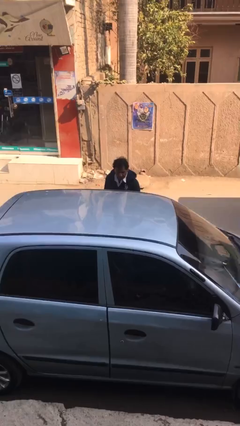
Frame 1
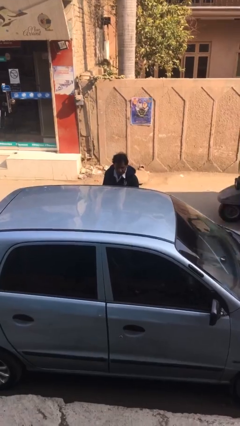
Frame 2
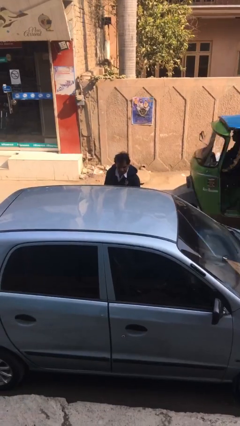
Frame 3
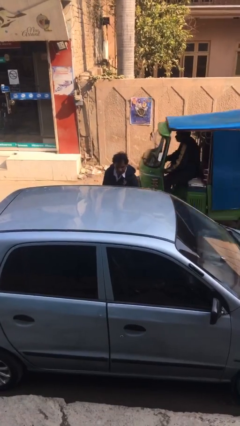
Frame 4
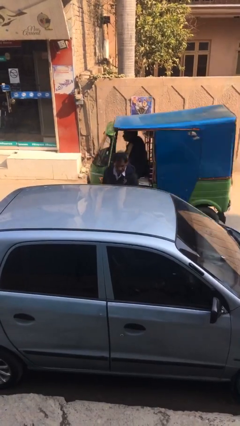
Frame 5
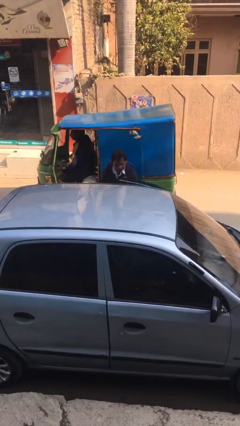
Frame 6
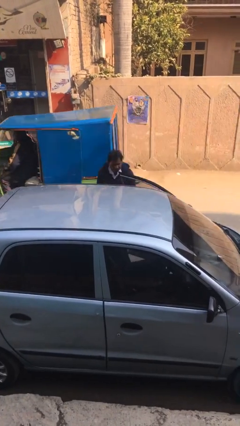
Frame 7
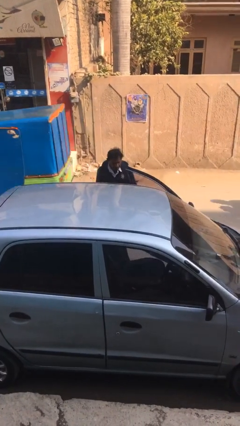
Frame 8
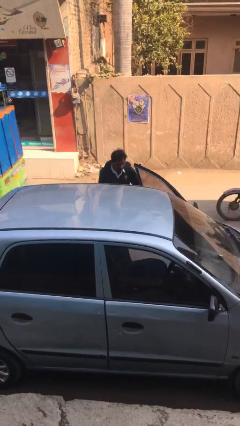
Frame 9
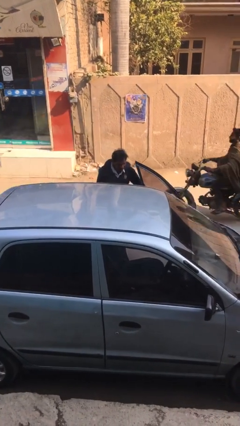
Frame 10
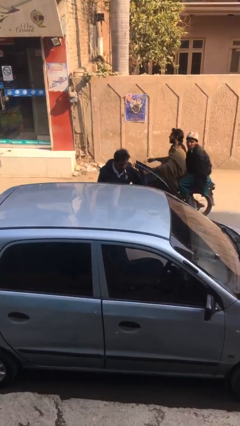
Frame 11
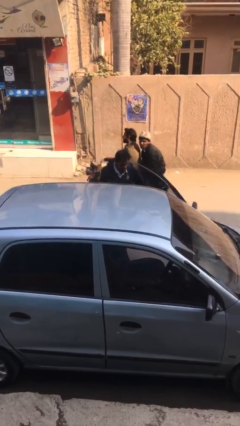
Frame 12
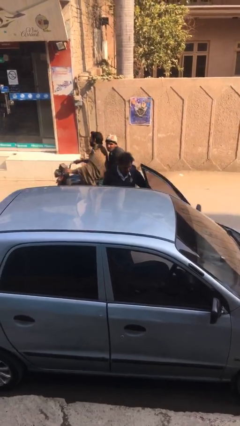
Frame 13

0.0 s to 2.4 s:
person opens car door

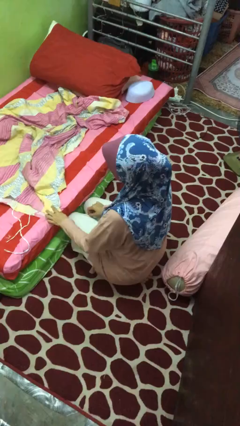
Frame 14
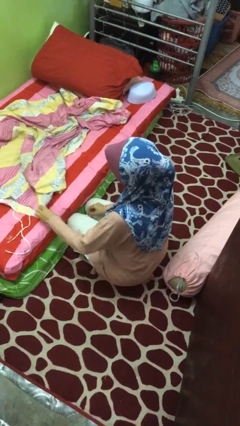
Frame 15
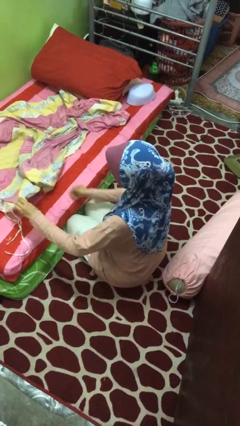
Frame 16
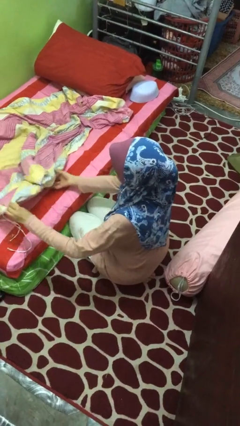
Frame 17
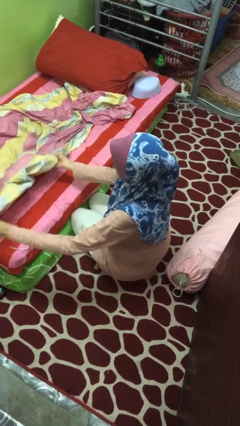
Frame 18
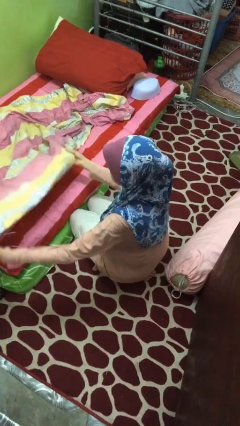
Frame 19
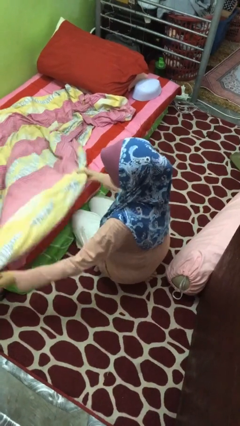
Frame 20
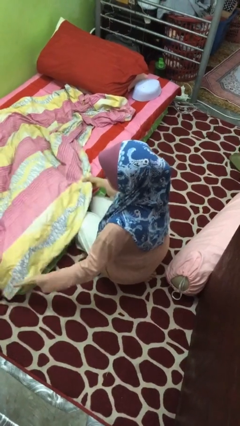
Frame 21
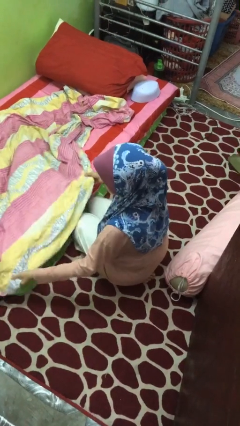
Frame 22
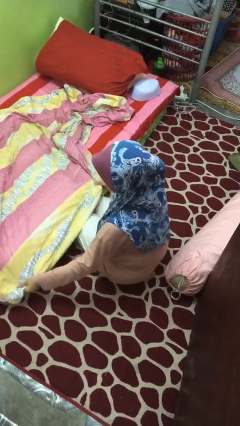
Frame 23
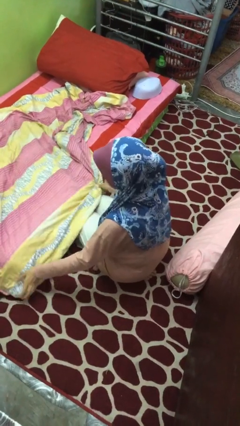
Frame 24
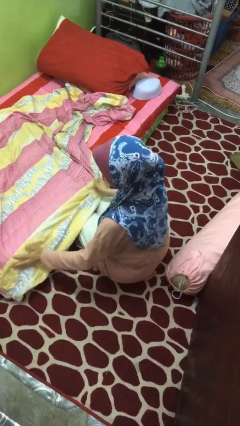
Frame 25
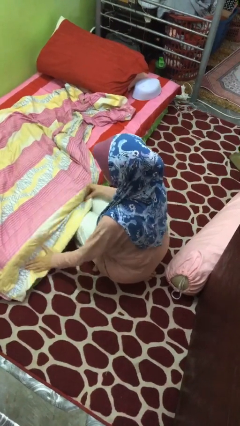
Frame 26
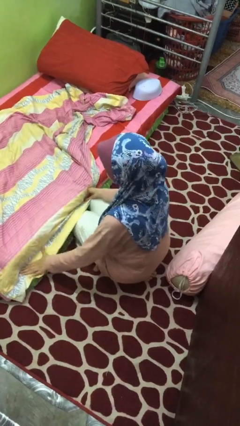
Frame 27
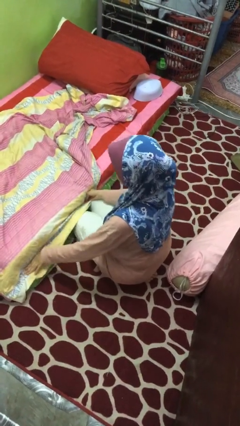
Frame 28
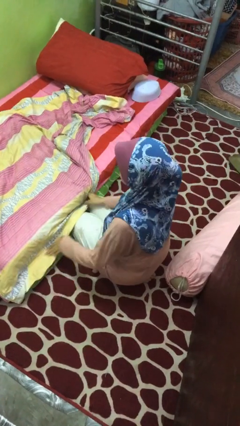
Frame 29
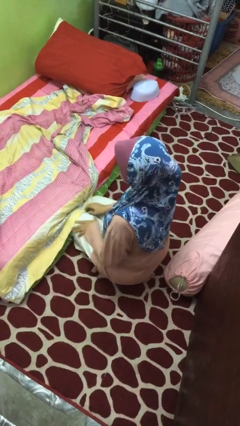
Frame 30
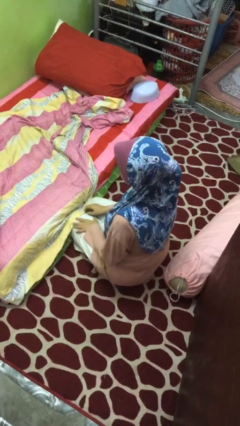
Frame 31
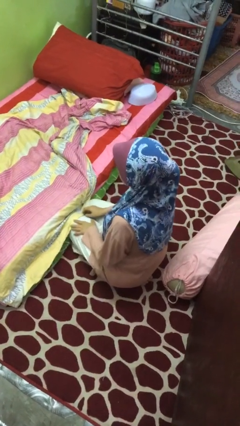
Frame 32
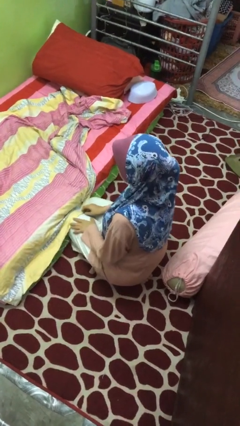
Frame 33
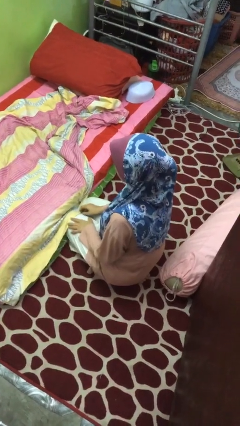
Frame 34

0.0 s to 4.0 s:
person makes bed

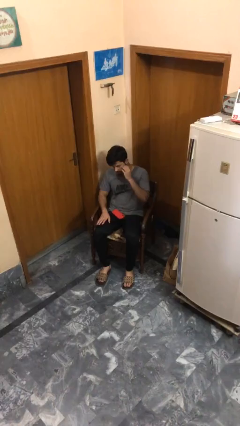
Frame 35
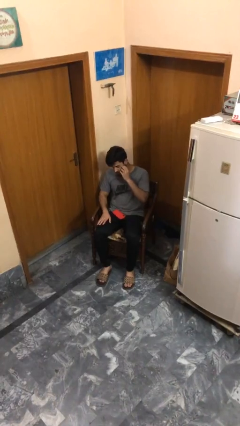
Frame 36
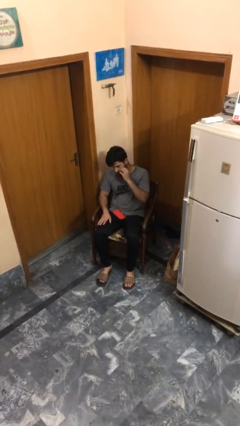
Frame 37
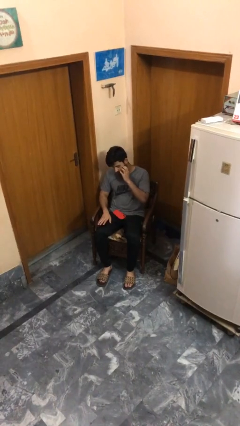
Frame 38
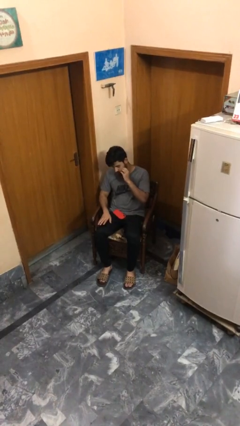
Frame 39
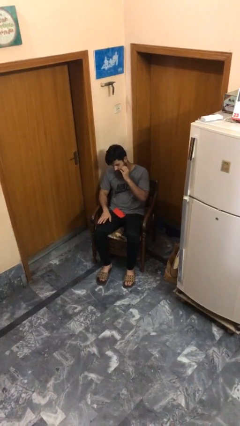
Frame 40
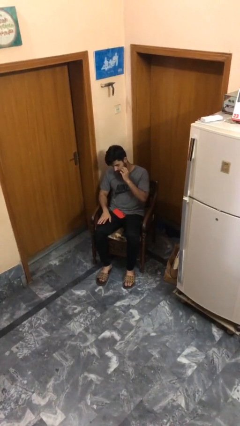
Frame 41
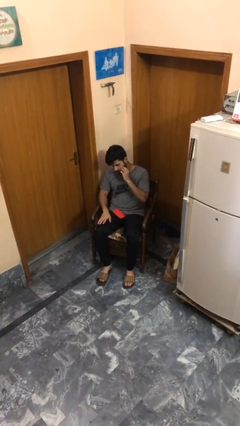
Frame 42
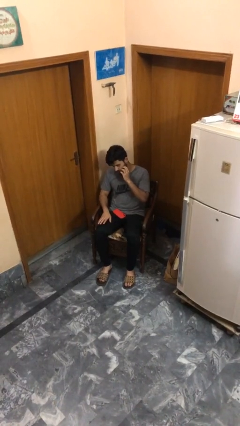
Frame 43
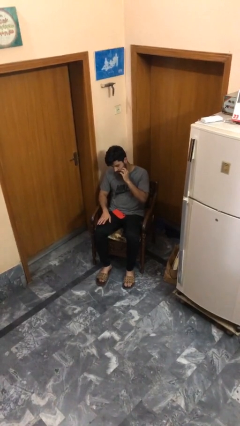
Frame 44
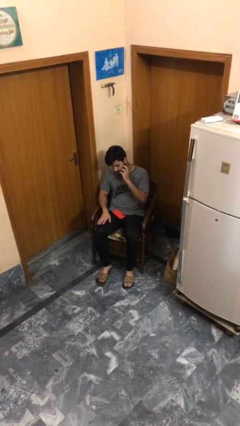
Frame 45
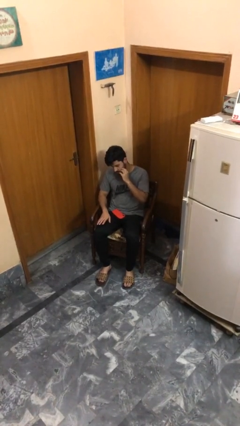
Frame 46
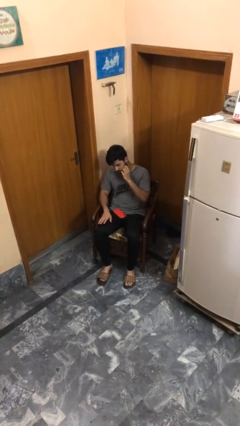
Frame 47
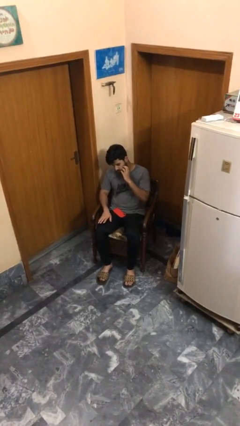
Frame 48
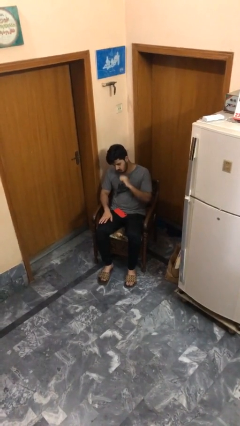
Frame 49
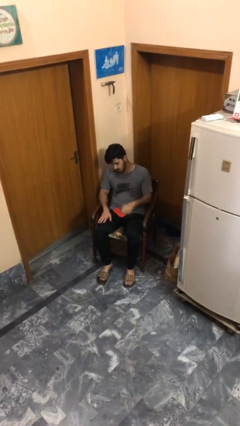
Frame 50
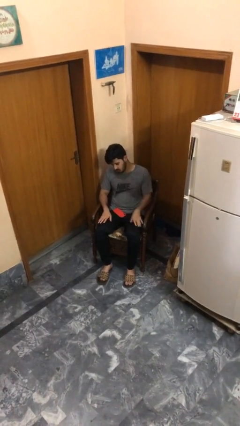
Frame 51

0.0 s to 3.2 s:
person scratches face

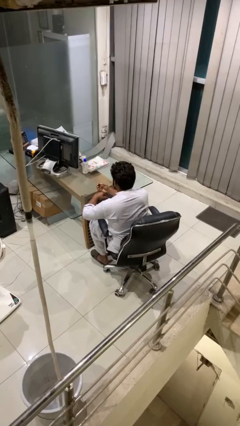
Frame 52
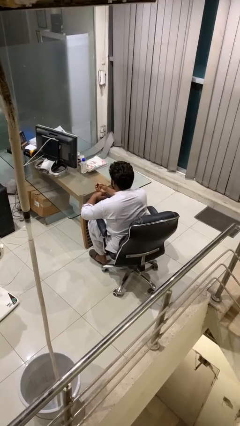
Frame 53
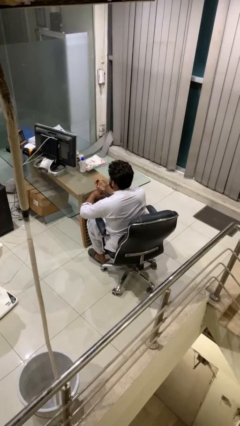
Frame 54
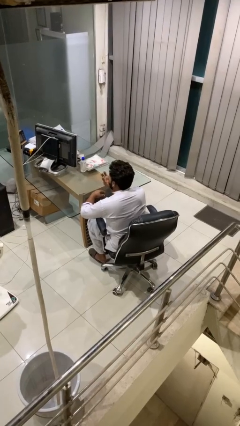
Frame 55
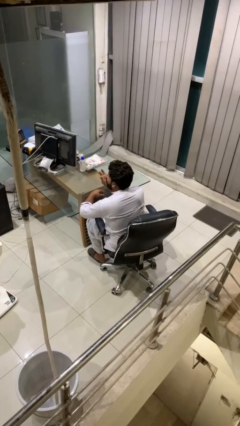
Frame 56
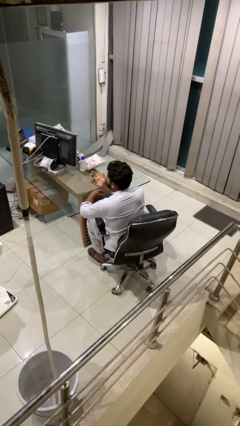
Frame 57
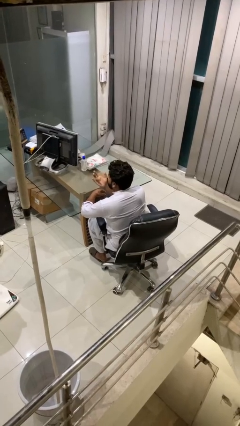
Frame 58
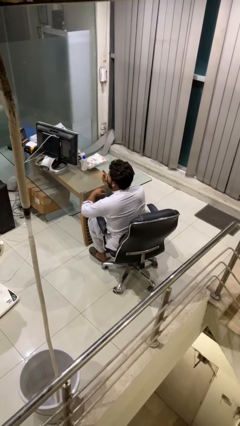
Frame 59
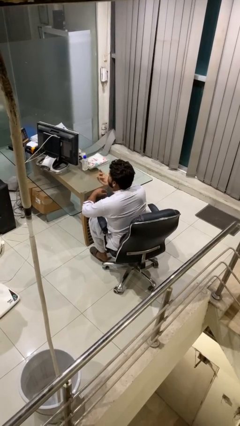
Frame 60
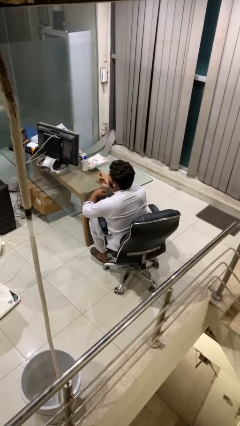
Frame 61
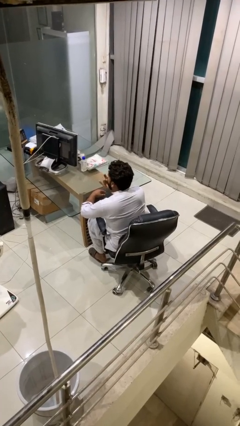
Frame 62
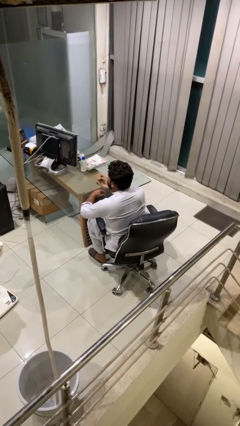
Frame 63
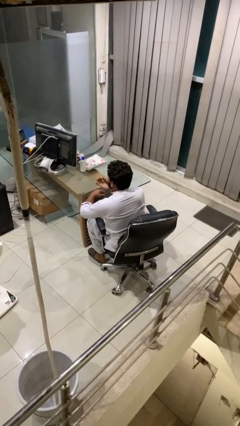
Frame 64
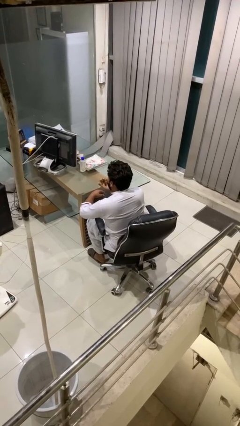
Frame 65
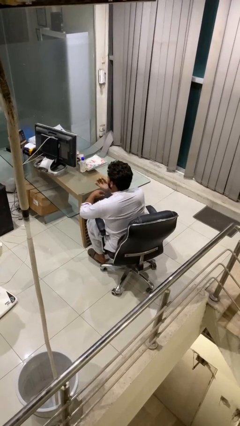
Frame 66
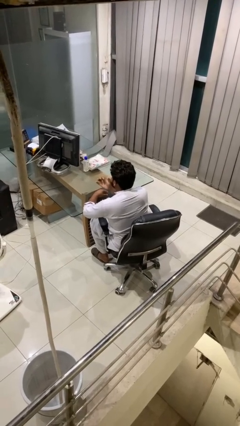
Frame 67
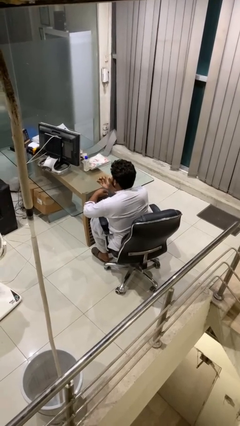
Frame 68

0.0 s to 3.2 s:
person licks fingers

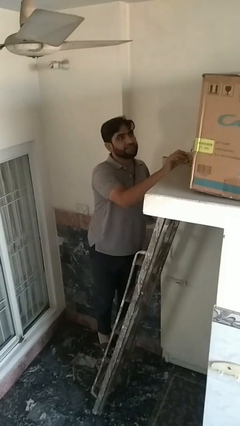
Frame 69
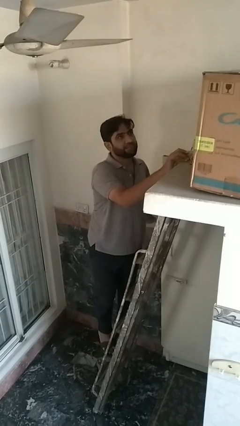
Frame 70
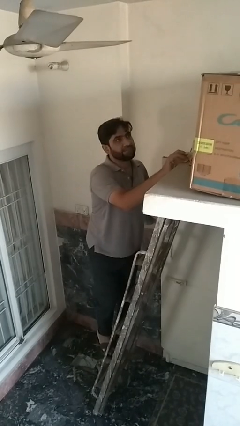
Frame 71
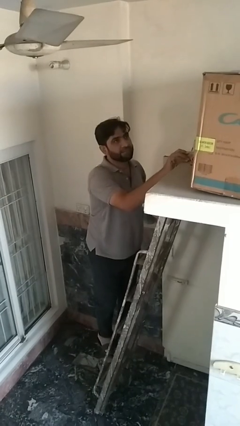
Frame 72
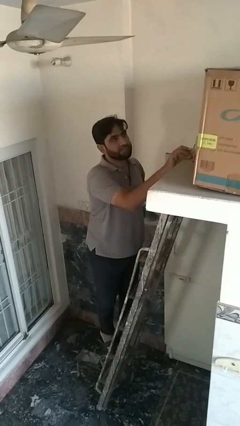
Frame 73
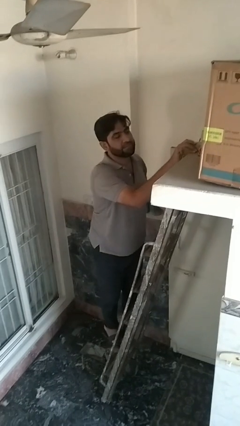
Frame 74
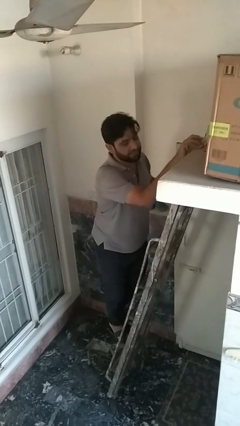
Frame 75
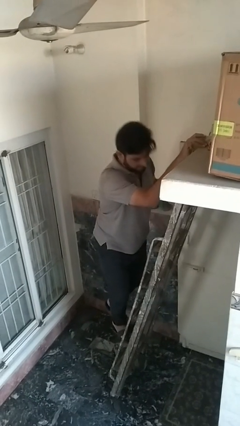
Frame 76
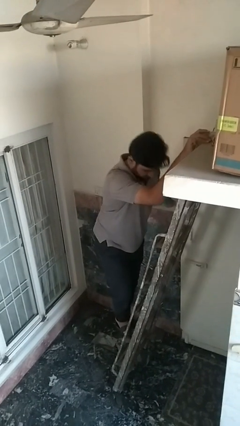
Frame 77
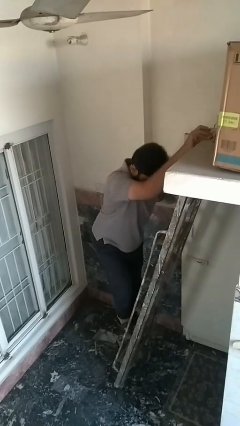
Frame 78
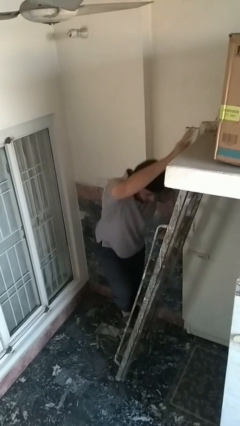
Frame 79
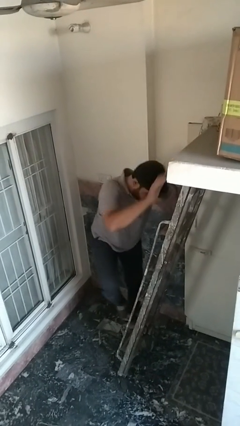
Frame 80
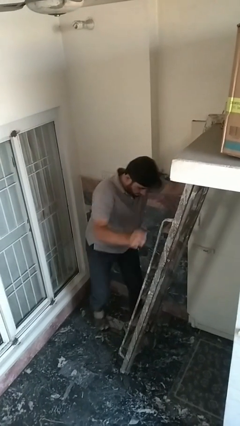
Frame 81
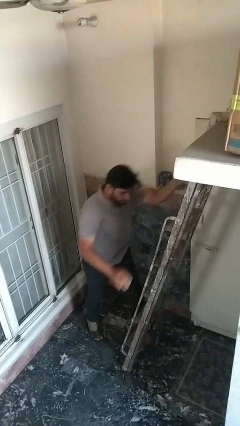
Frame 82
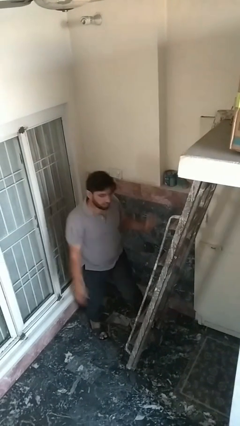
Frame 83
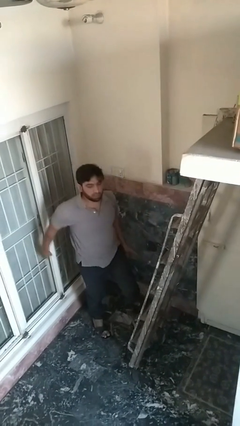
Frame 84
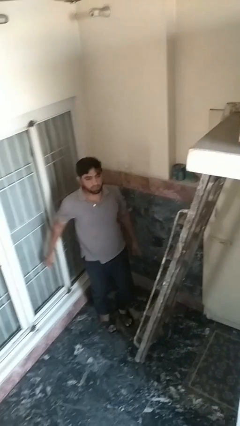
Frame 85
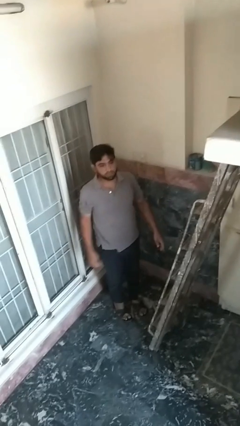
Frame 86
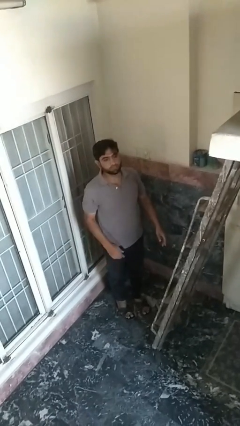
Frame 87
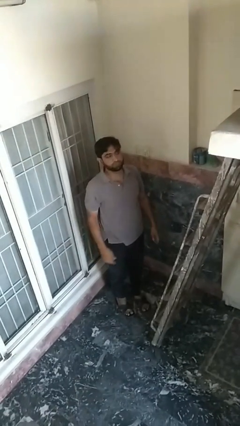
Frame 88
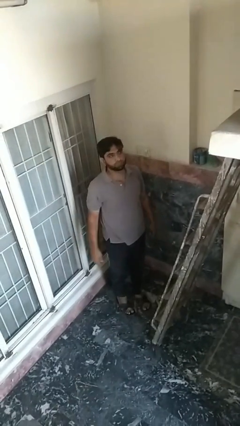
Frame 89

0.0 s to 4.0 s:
person climbs down ladder

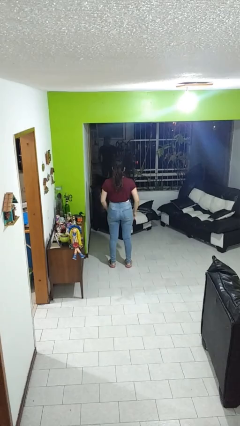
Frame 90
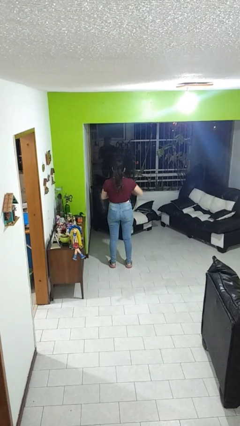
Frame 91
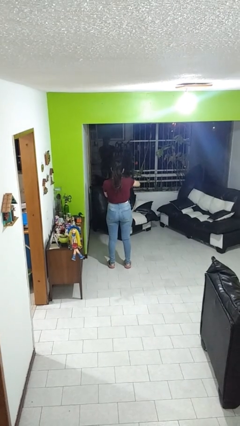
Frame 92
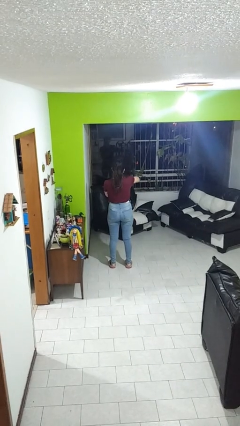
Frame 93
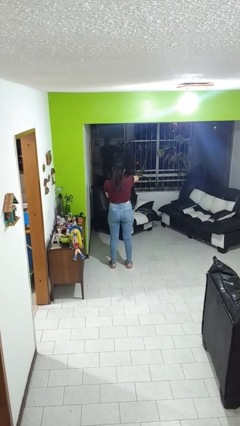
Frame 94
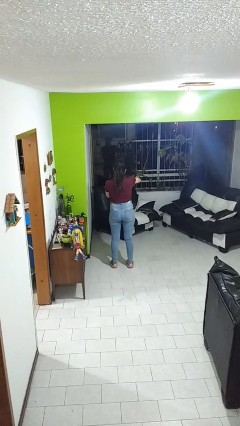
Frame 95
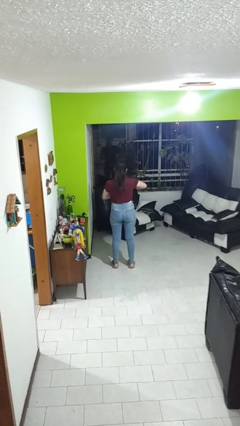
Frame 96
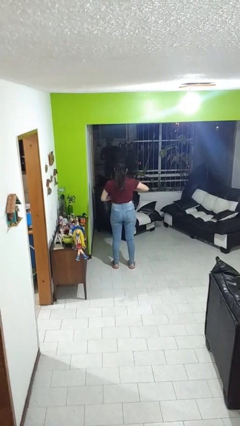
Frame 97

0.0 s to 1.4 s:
person cracks knuckles
